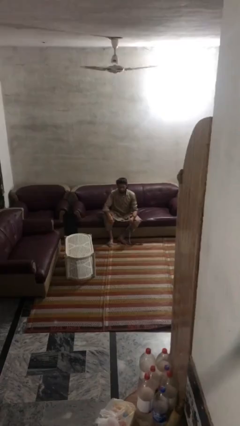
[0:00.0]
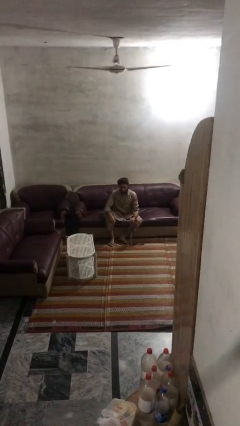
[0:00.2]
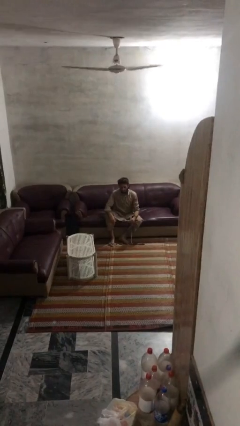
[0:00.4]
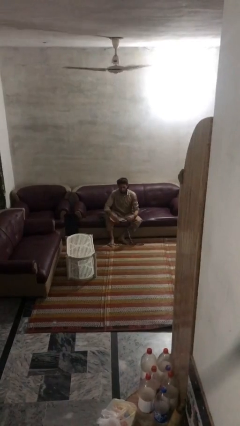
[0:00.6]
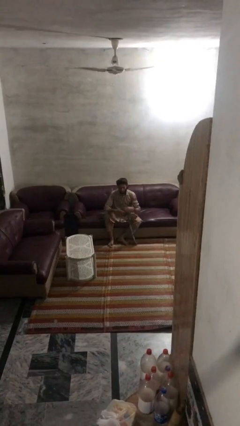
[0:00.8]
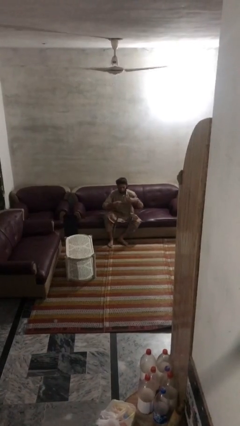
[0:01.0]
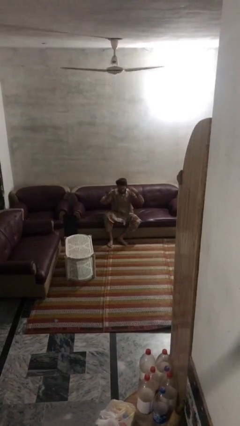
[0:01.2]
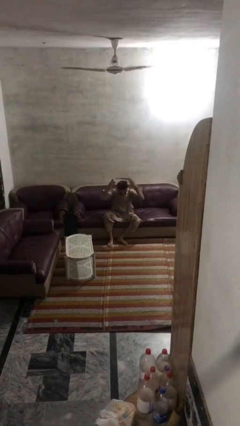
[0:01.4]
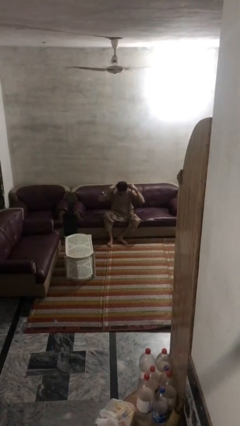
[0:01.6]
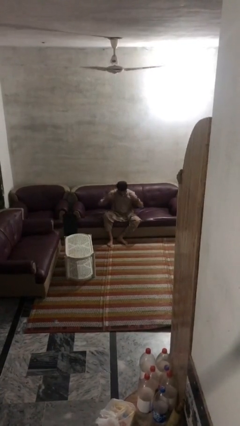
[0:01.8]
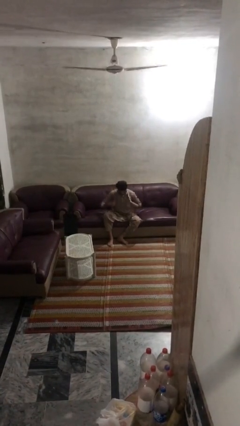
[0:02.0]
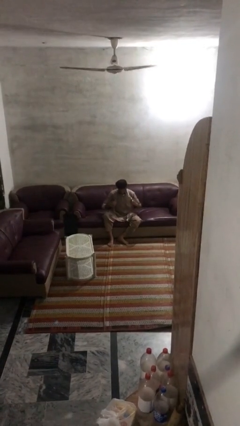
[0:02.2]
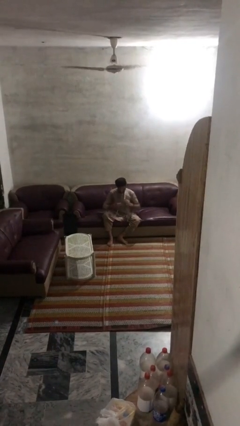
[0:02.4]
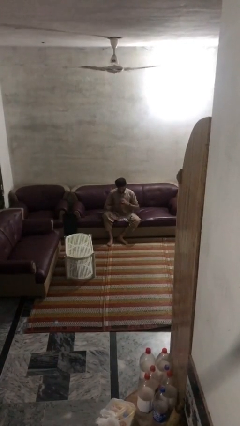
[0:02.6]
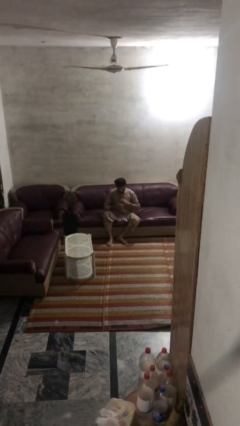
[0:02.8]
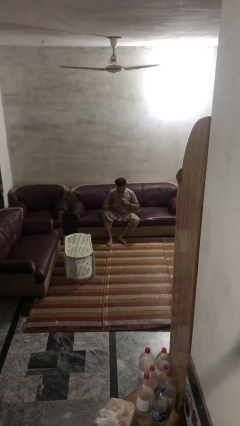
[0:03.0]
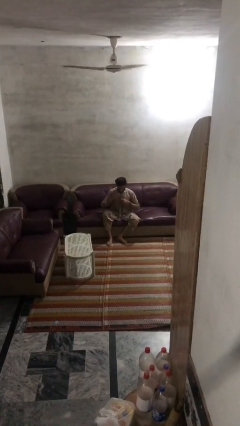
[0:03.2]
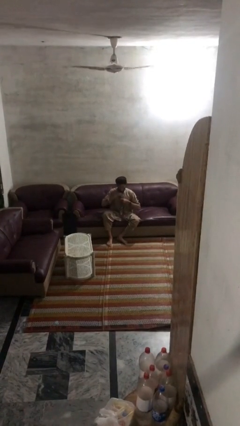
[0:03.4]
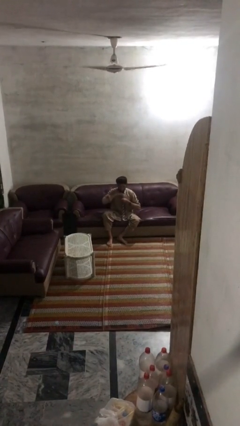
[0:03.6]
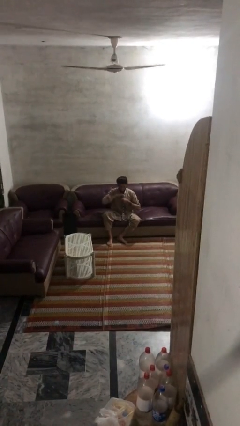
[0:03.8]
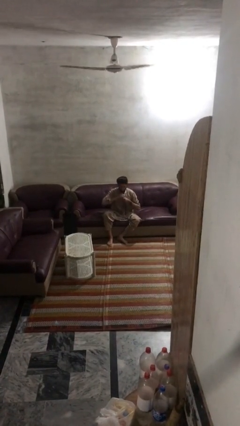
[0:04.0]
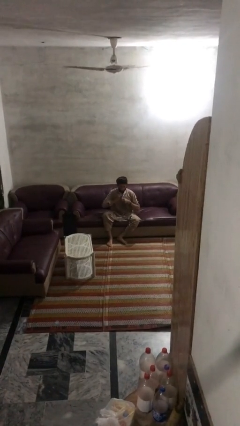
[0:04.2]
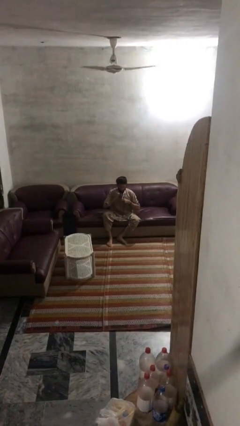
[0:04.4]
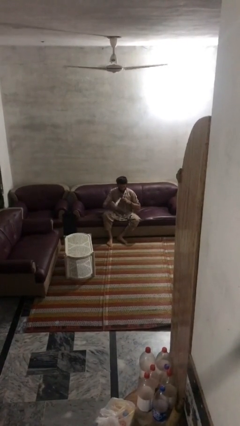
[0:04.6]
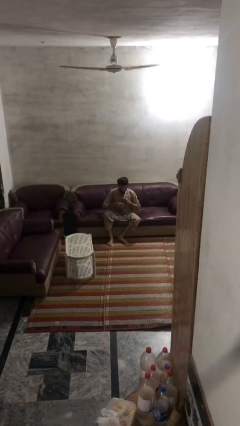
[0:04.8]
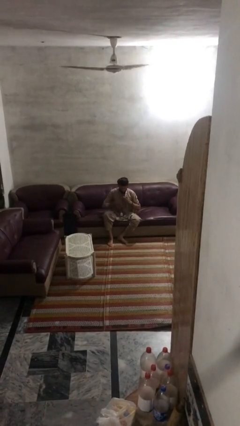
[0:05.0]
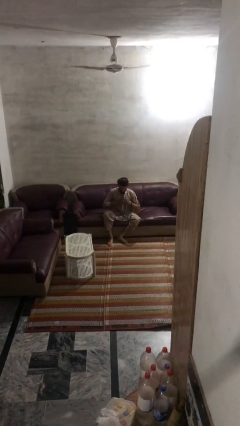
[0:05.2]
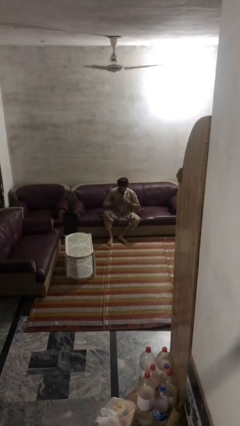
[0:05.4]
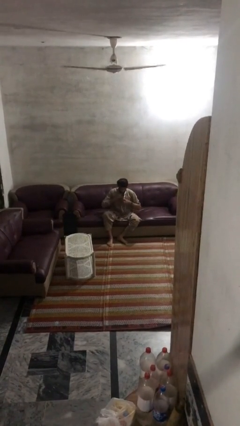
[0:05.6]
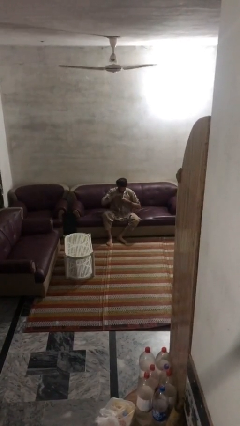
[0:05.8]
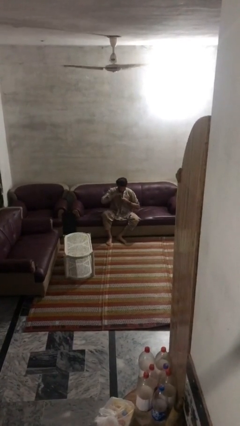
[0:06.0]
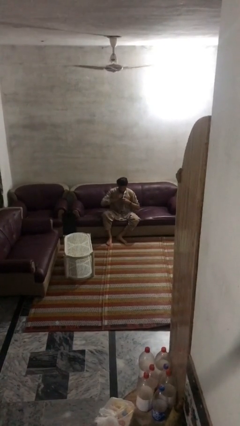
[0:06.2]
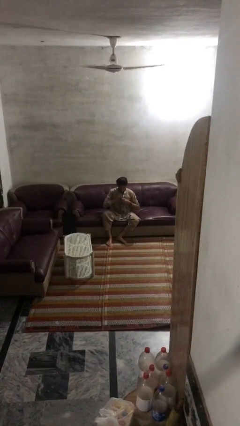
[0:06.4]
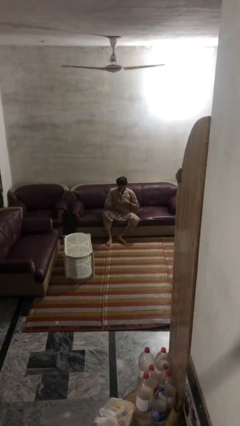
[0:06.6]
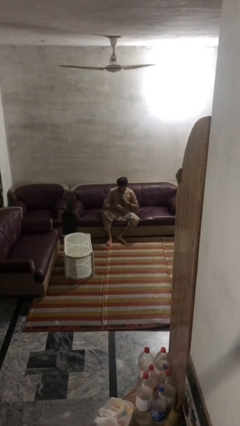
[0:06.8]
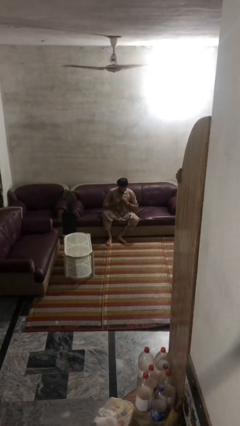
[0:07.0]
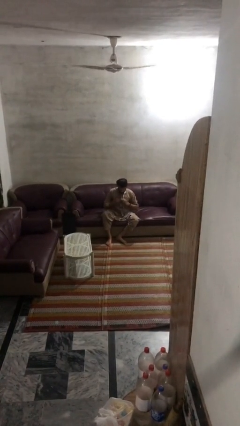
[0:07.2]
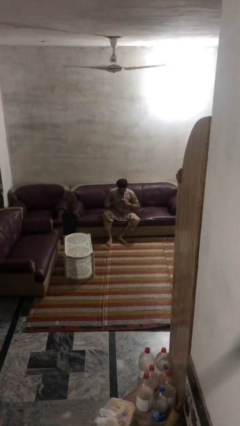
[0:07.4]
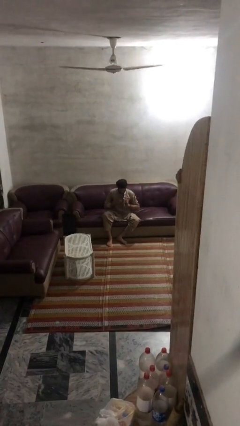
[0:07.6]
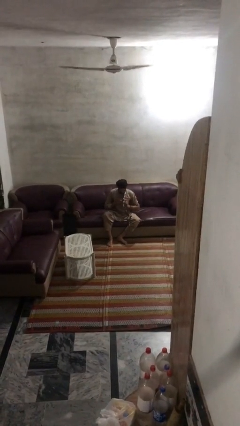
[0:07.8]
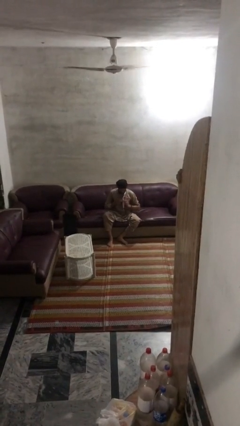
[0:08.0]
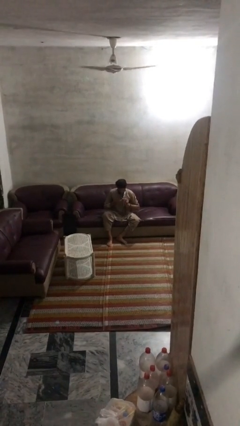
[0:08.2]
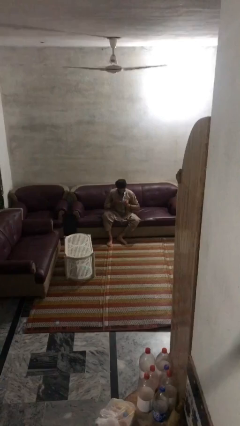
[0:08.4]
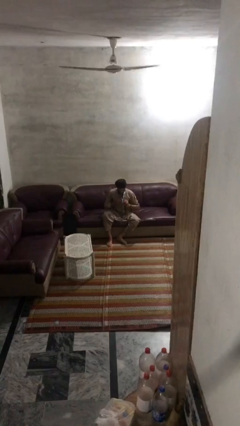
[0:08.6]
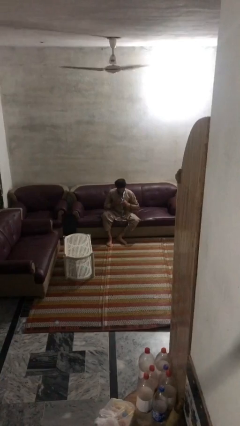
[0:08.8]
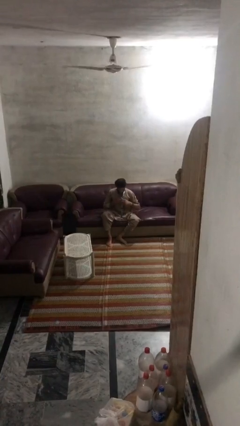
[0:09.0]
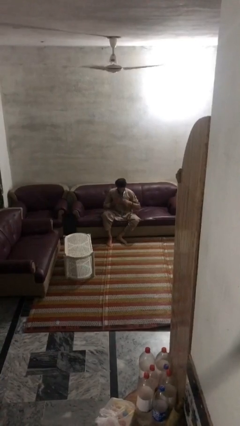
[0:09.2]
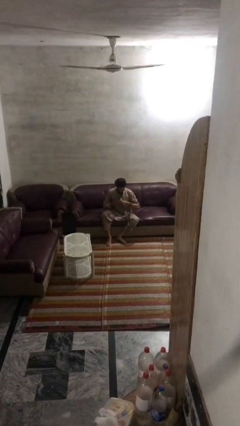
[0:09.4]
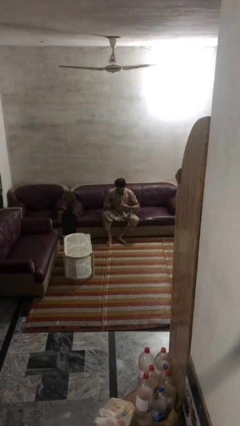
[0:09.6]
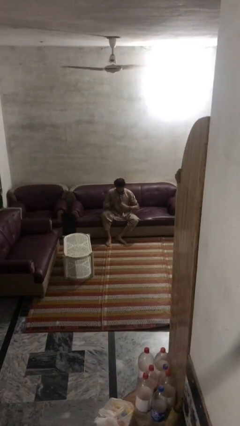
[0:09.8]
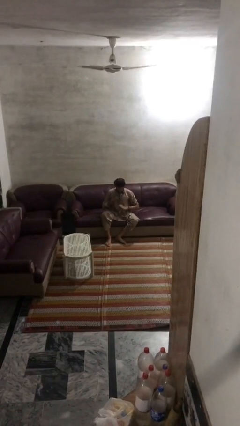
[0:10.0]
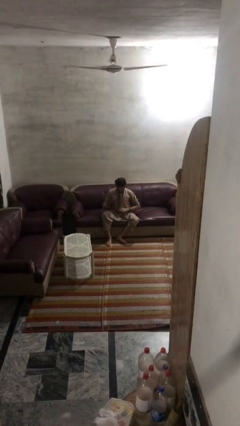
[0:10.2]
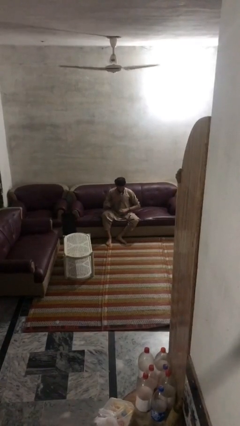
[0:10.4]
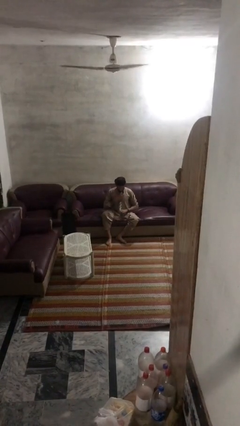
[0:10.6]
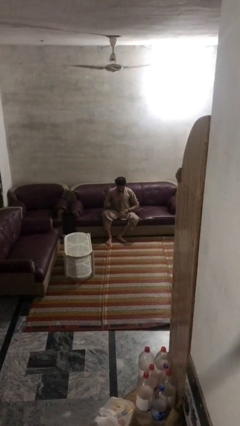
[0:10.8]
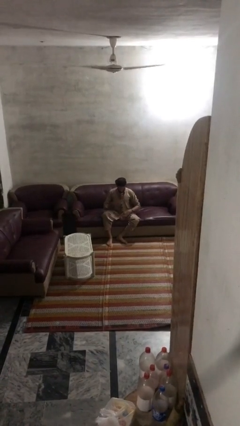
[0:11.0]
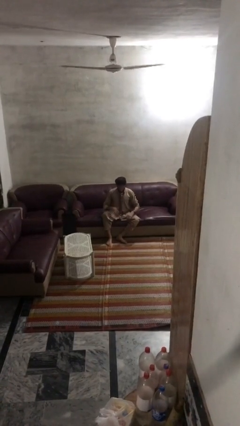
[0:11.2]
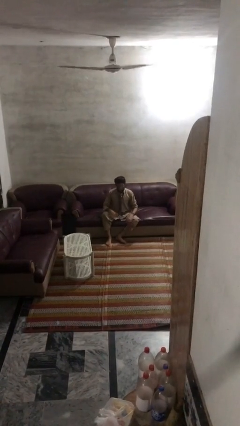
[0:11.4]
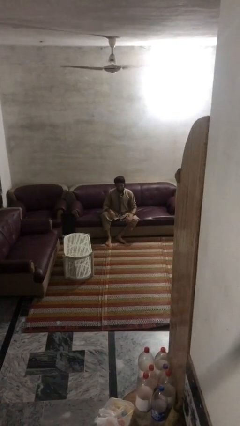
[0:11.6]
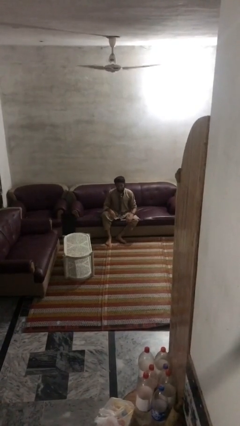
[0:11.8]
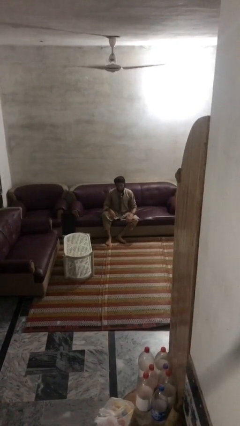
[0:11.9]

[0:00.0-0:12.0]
person puts on necktie

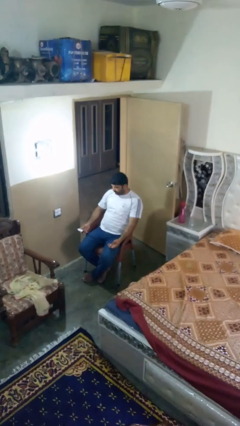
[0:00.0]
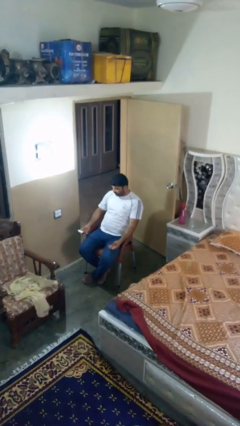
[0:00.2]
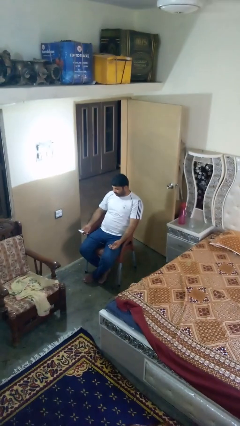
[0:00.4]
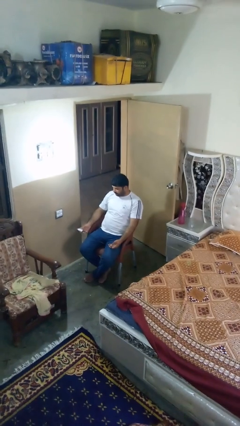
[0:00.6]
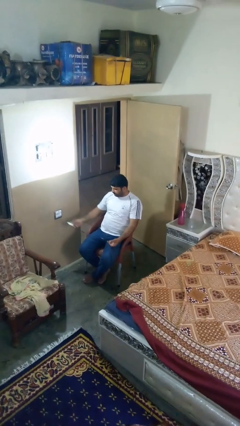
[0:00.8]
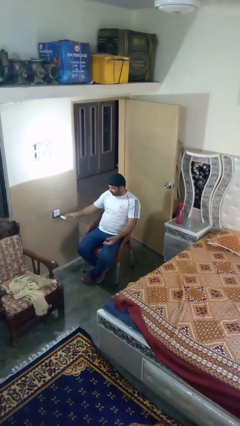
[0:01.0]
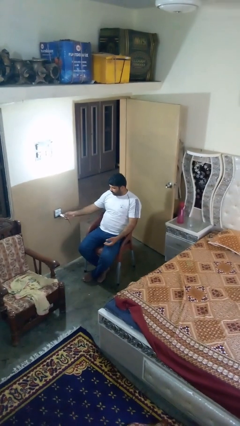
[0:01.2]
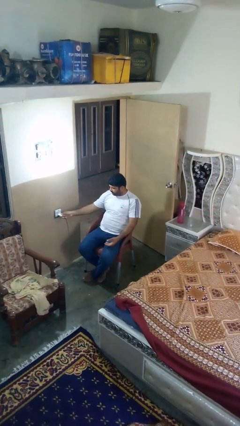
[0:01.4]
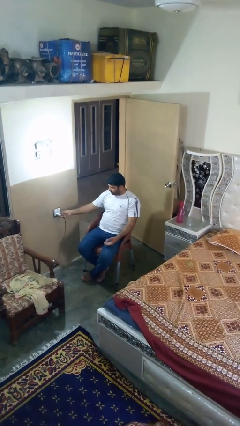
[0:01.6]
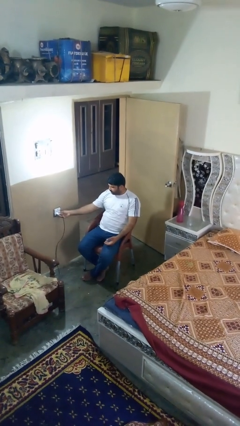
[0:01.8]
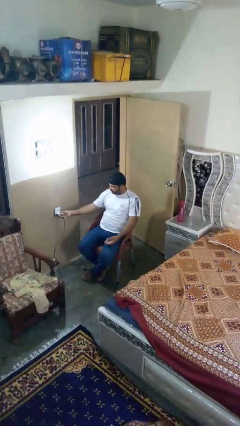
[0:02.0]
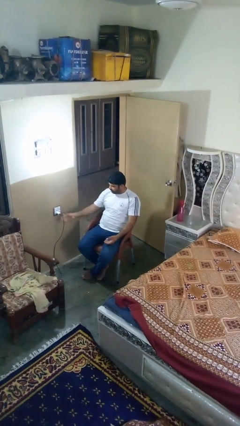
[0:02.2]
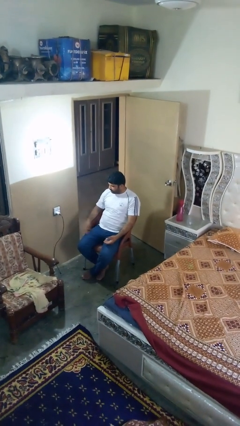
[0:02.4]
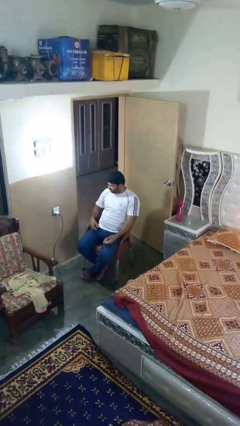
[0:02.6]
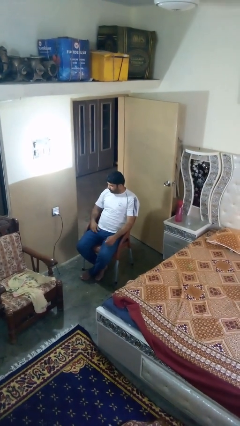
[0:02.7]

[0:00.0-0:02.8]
person plugs into electrical socket

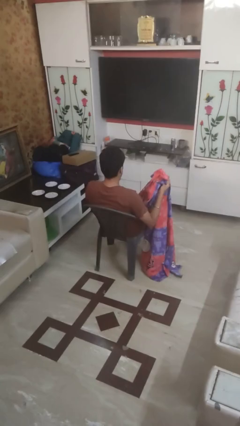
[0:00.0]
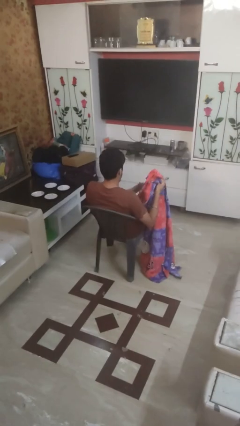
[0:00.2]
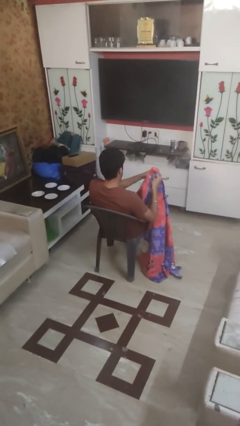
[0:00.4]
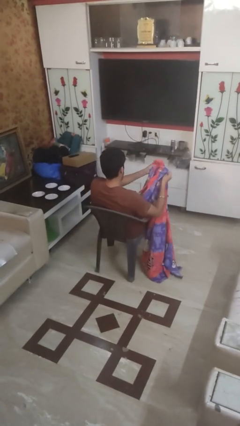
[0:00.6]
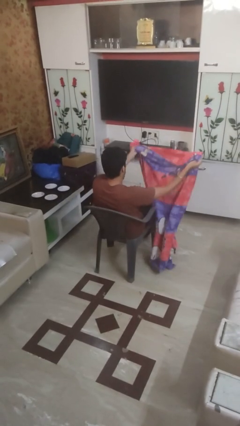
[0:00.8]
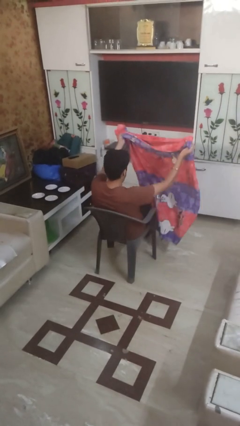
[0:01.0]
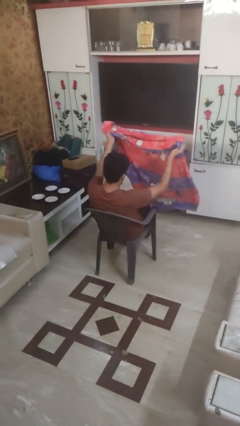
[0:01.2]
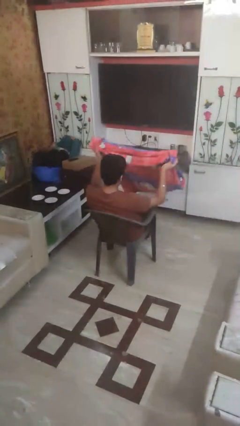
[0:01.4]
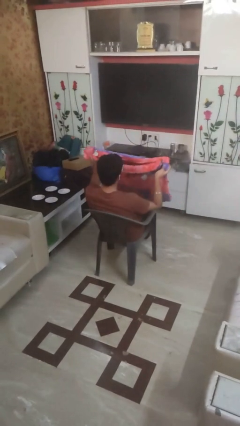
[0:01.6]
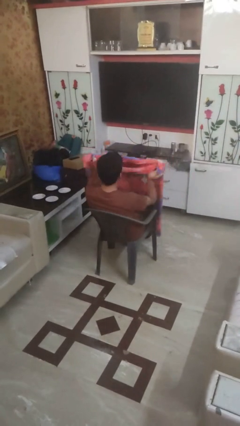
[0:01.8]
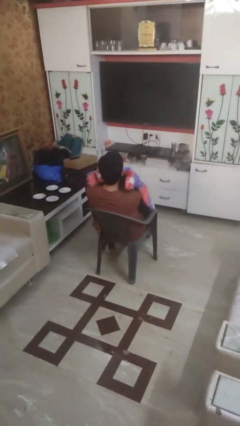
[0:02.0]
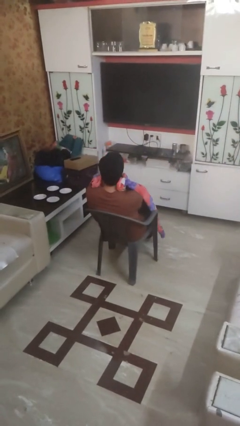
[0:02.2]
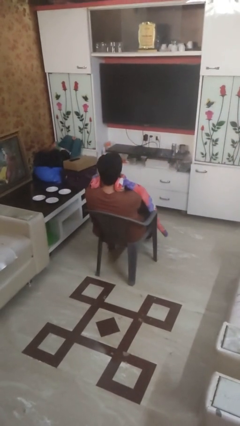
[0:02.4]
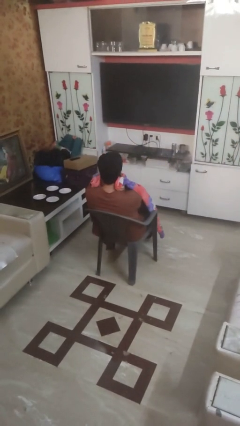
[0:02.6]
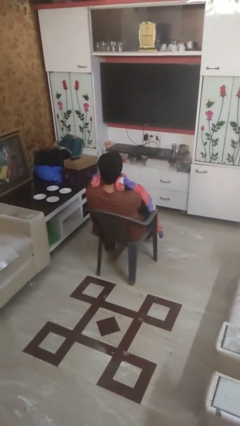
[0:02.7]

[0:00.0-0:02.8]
person covers with blanket

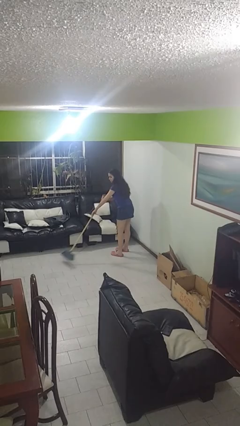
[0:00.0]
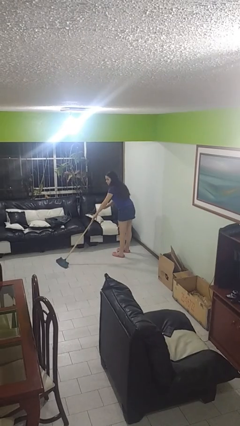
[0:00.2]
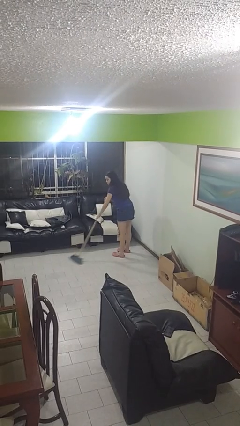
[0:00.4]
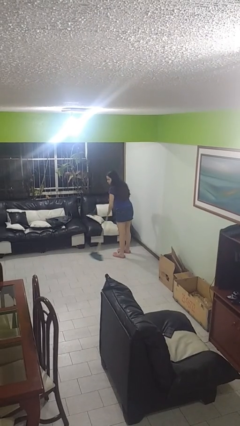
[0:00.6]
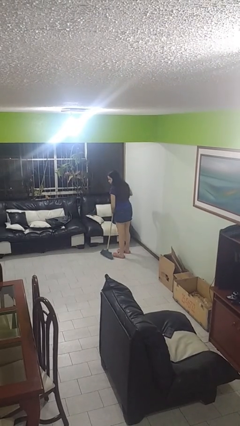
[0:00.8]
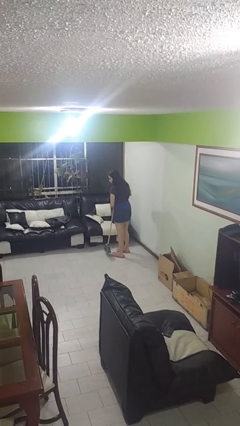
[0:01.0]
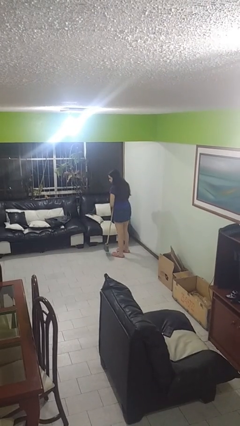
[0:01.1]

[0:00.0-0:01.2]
person sweeps floor
